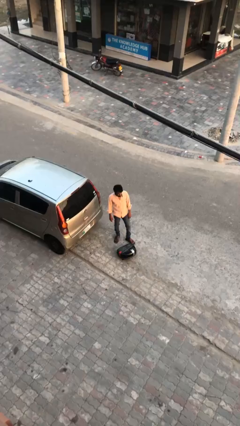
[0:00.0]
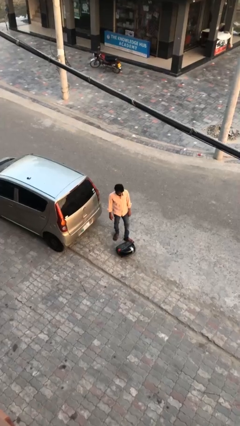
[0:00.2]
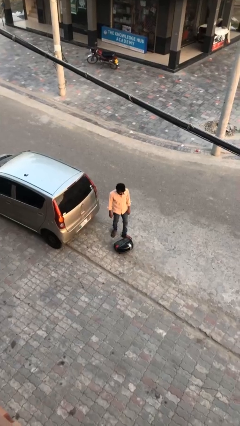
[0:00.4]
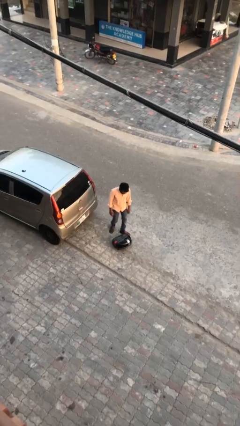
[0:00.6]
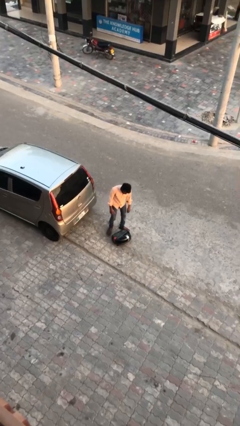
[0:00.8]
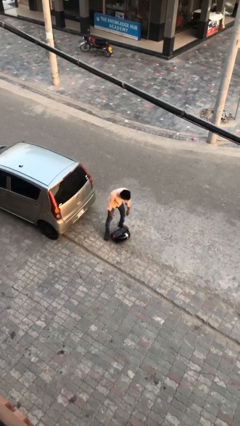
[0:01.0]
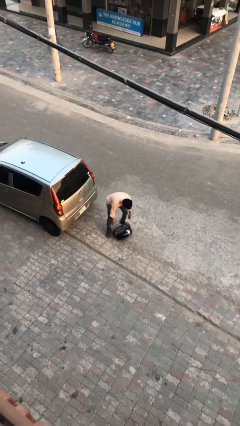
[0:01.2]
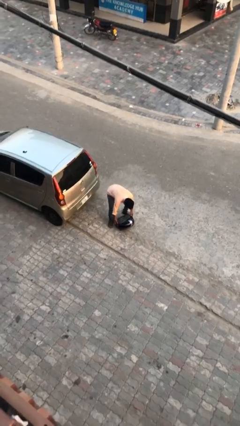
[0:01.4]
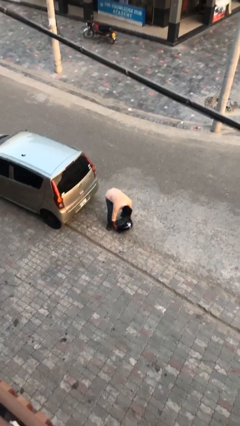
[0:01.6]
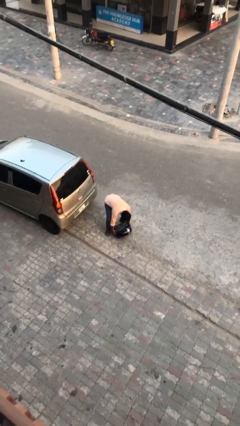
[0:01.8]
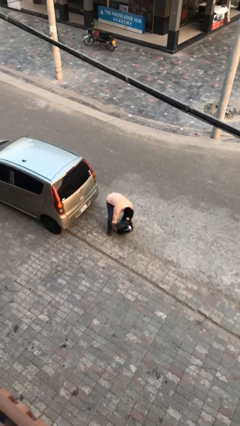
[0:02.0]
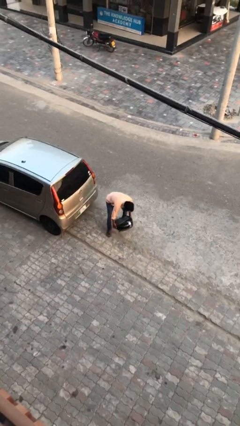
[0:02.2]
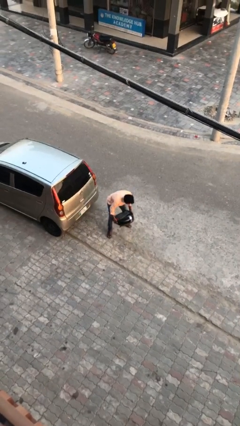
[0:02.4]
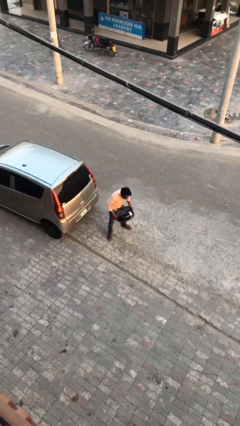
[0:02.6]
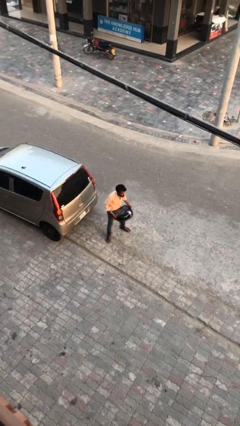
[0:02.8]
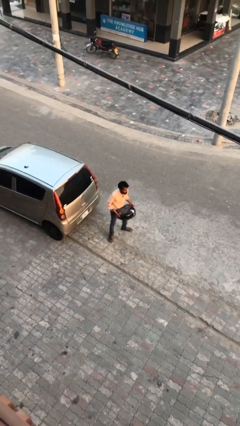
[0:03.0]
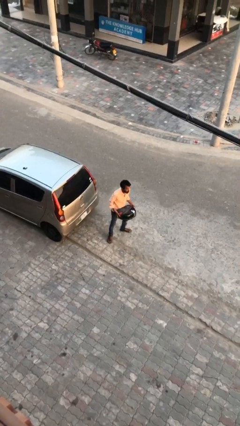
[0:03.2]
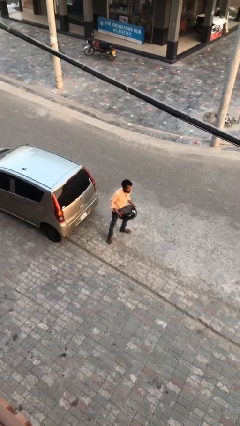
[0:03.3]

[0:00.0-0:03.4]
person picks up object from floor

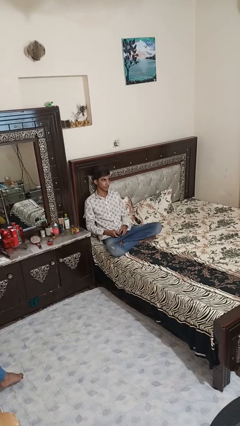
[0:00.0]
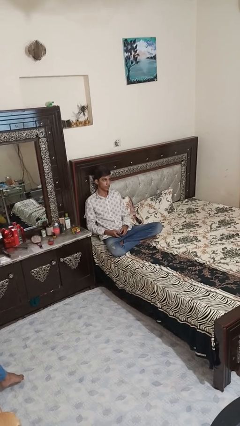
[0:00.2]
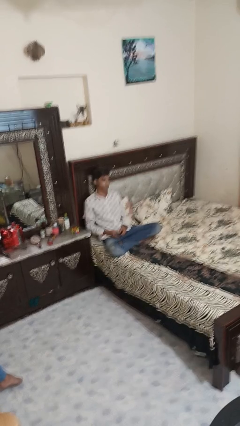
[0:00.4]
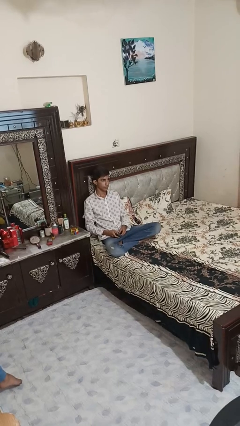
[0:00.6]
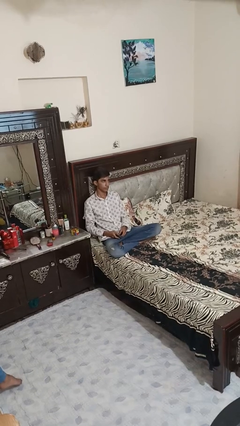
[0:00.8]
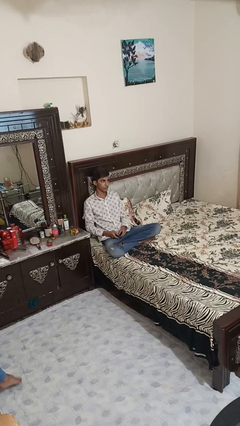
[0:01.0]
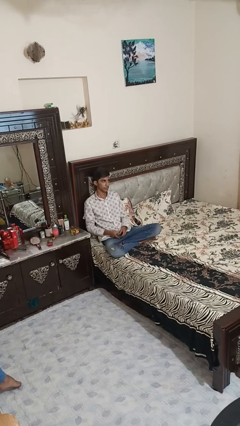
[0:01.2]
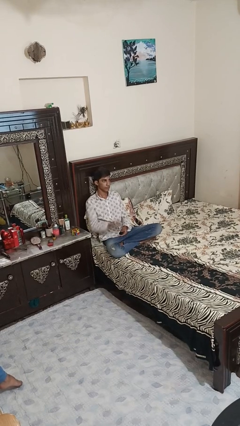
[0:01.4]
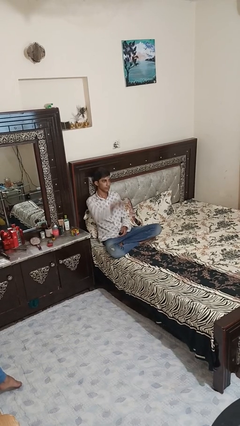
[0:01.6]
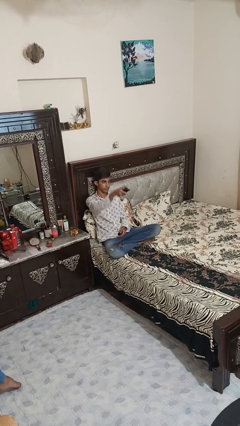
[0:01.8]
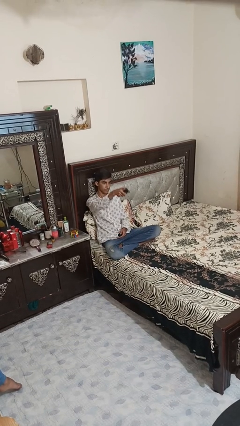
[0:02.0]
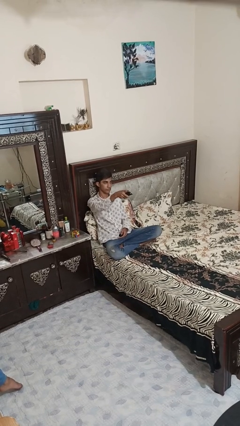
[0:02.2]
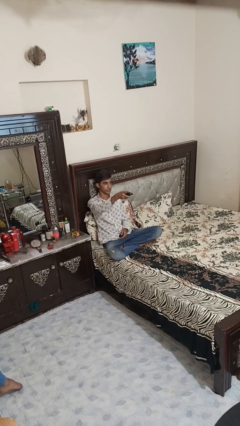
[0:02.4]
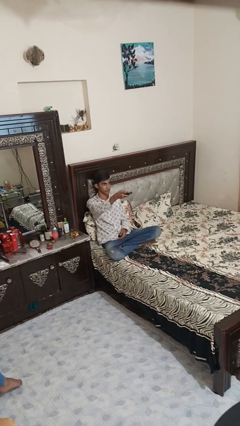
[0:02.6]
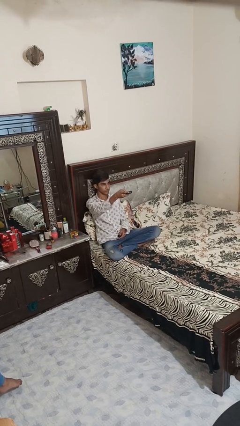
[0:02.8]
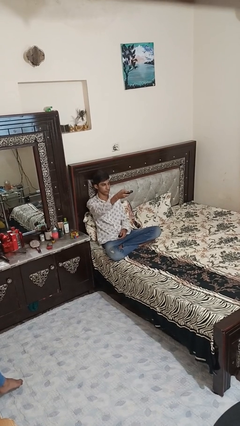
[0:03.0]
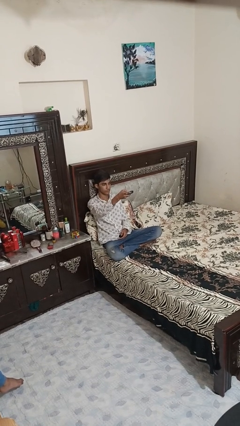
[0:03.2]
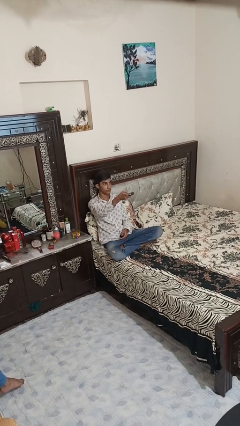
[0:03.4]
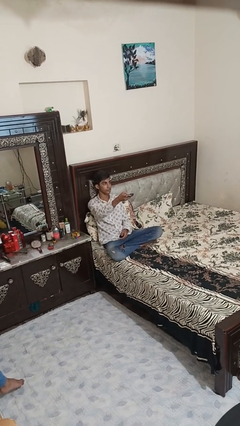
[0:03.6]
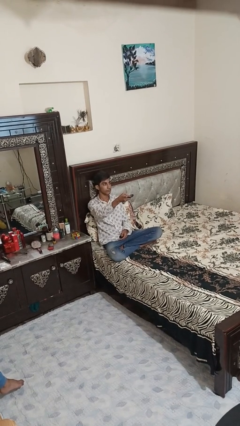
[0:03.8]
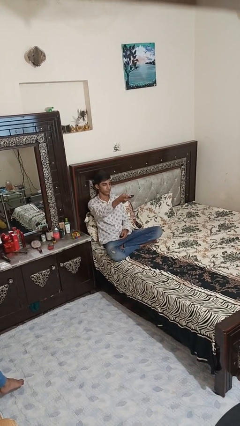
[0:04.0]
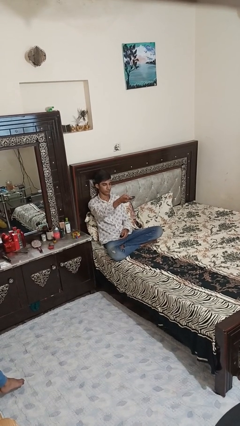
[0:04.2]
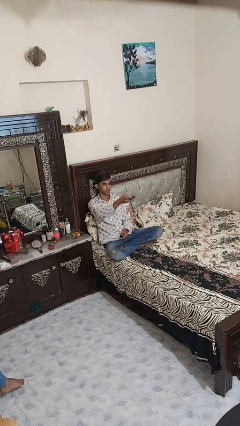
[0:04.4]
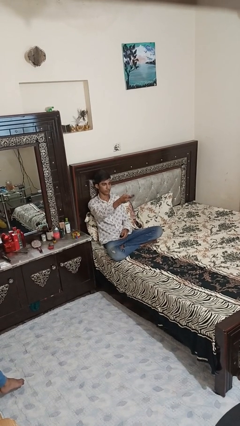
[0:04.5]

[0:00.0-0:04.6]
person uses television remote

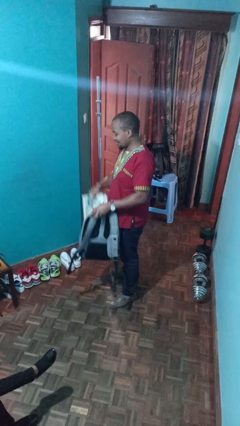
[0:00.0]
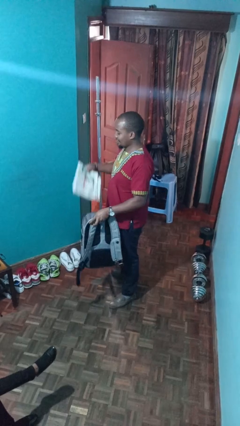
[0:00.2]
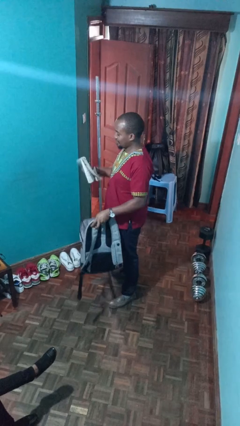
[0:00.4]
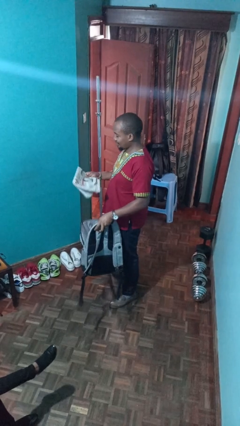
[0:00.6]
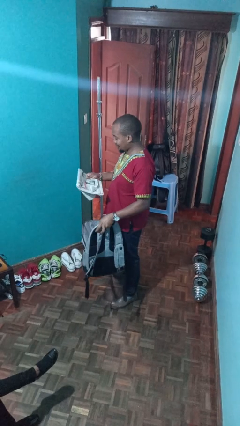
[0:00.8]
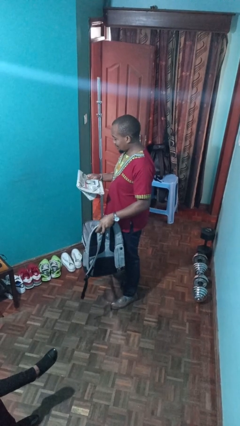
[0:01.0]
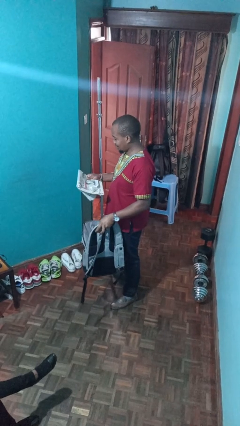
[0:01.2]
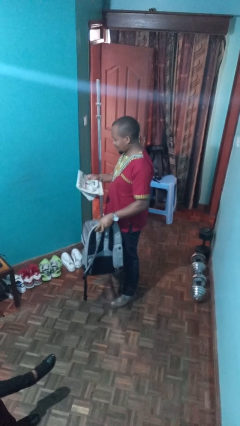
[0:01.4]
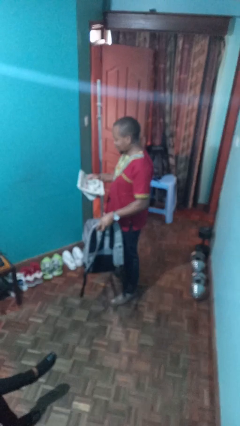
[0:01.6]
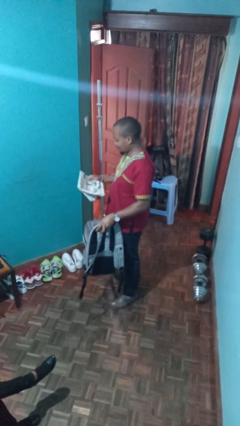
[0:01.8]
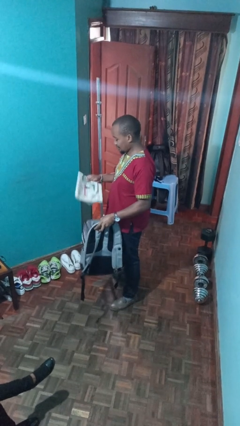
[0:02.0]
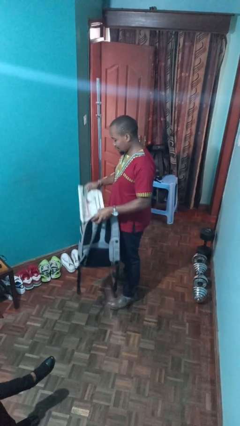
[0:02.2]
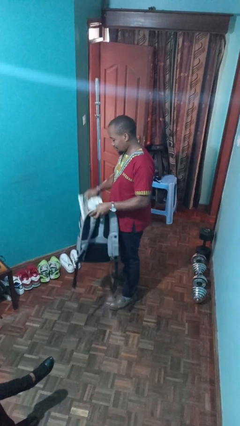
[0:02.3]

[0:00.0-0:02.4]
person takes object from backpack

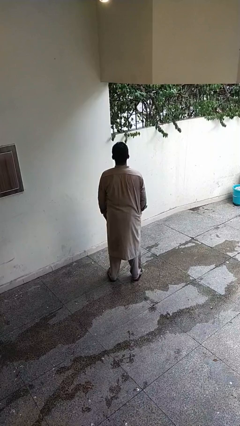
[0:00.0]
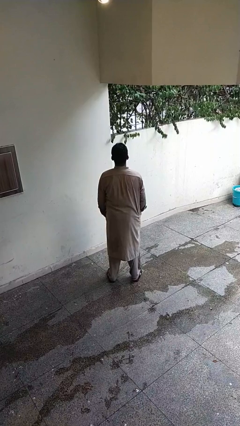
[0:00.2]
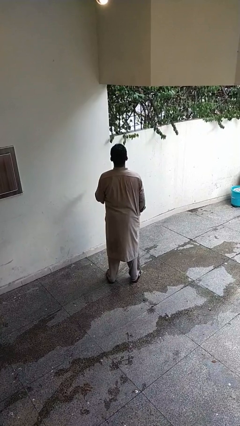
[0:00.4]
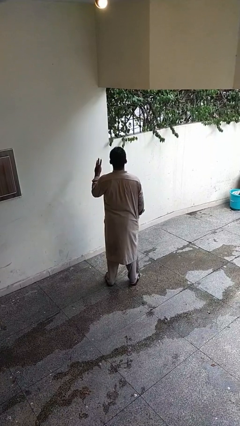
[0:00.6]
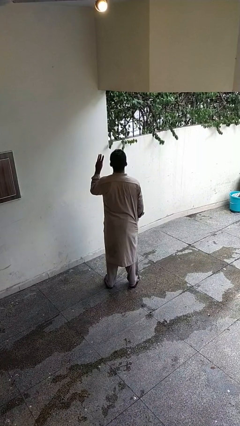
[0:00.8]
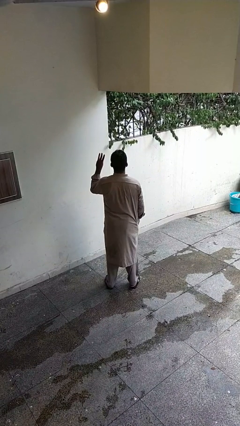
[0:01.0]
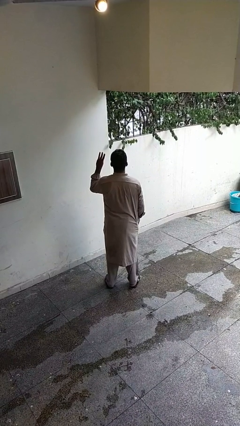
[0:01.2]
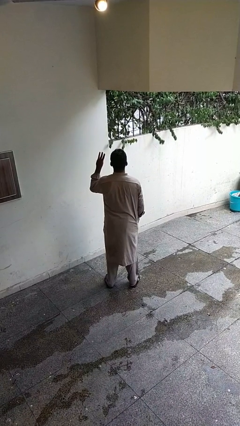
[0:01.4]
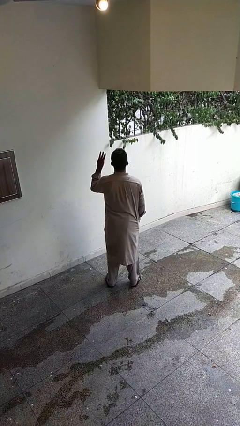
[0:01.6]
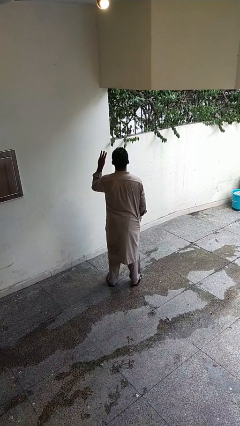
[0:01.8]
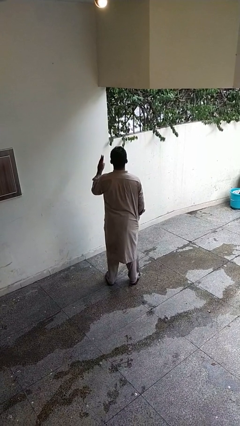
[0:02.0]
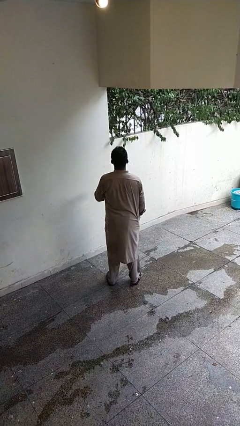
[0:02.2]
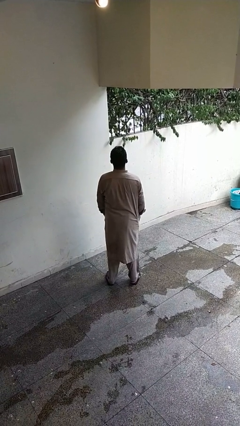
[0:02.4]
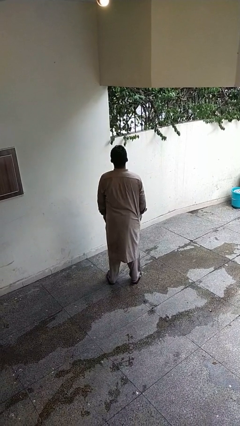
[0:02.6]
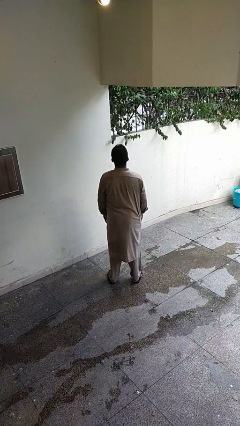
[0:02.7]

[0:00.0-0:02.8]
person gestures number three

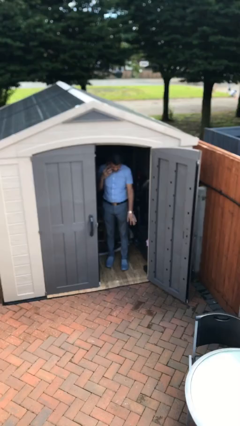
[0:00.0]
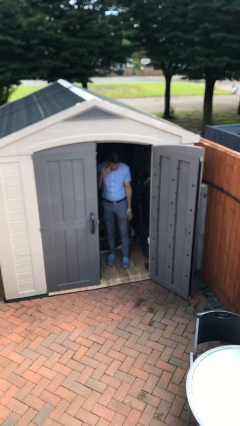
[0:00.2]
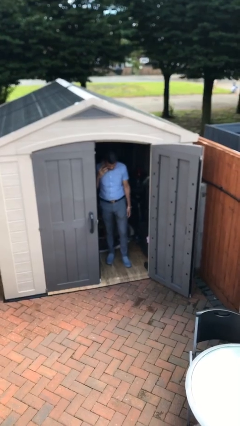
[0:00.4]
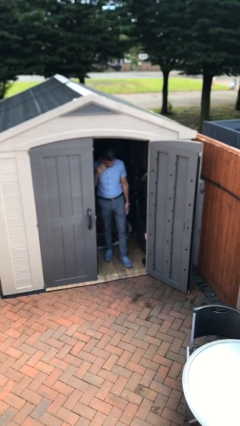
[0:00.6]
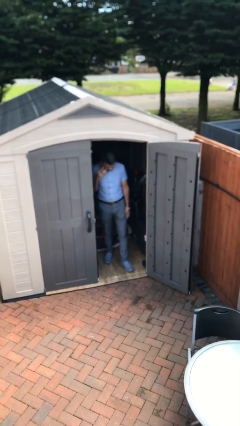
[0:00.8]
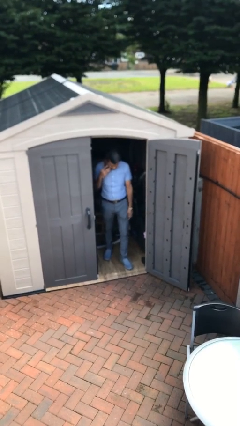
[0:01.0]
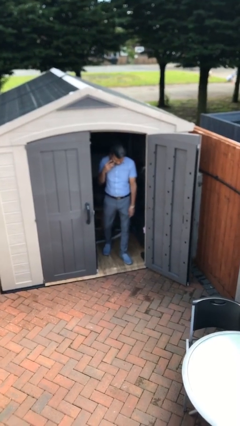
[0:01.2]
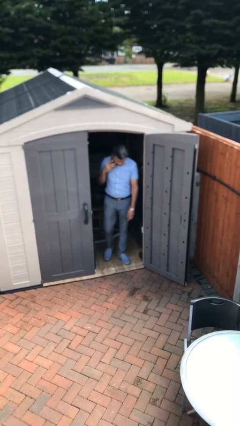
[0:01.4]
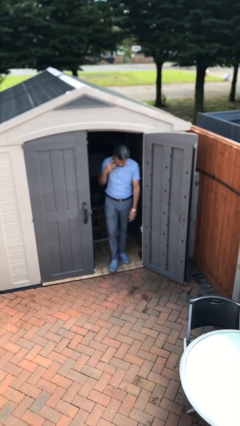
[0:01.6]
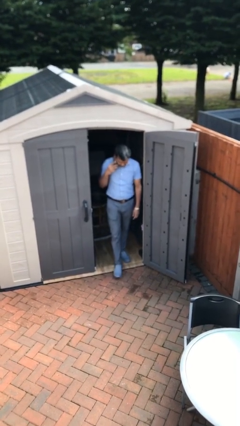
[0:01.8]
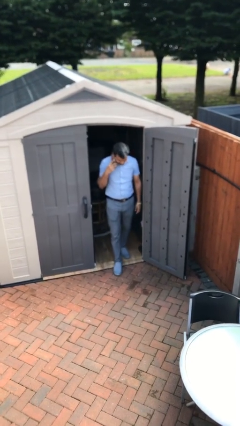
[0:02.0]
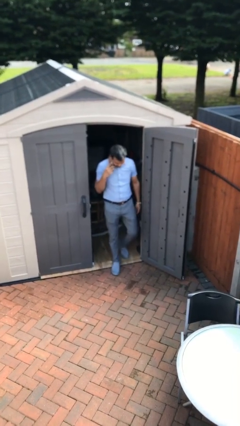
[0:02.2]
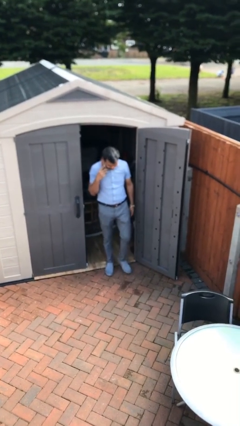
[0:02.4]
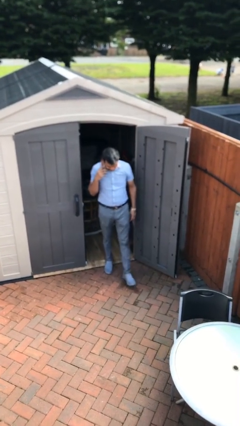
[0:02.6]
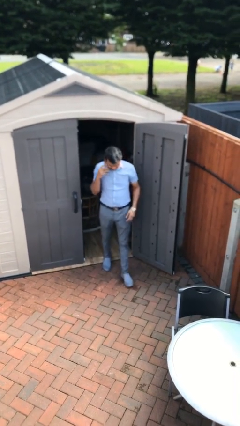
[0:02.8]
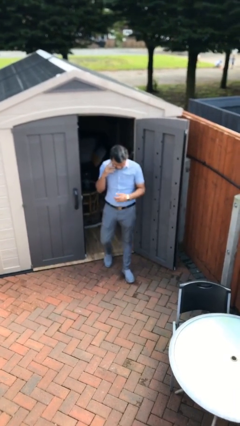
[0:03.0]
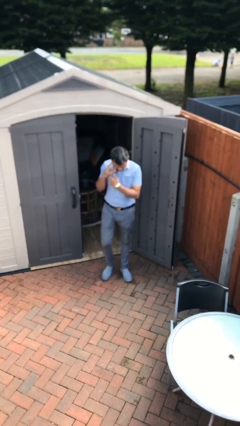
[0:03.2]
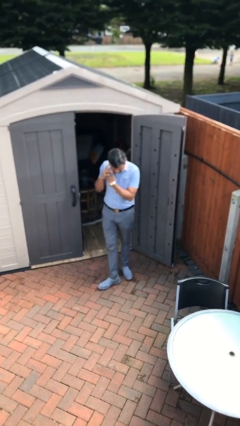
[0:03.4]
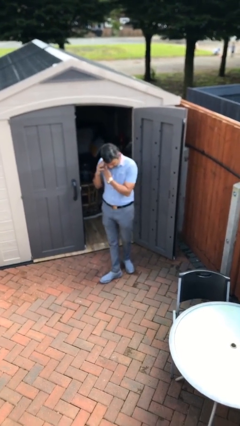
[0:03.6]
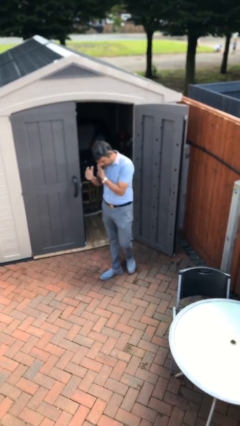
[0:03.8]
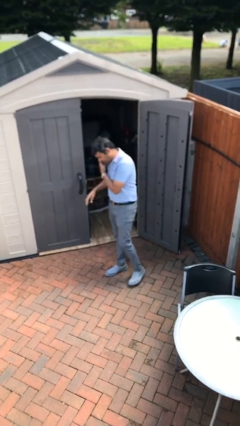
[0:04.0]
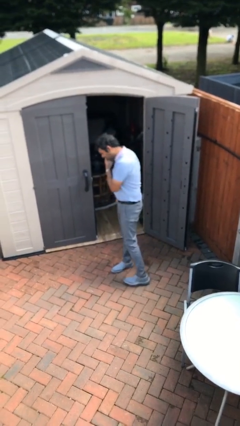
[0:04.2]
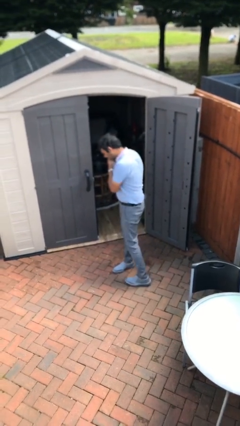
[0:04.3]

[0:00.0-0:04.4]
person enters scene through structure
